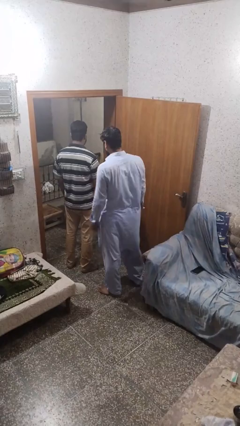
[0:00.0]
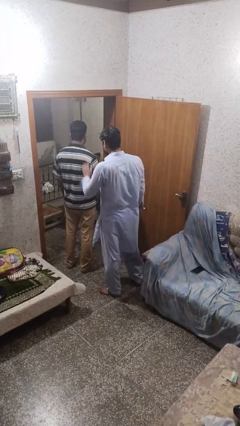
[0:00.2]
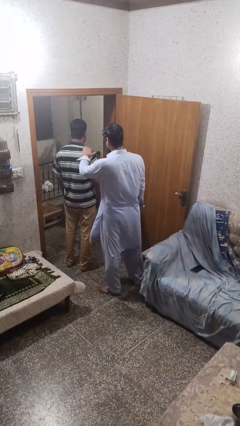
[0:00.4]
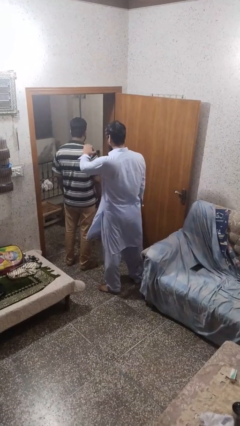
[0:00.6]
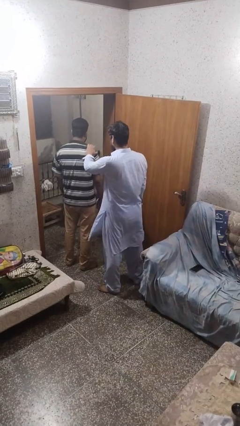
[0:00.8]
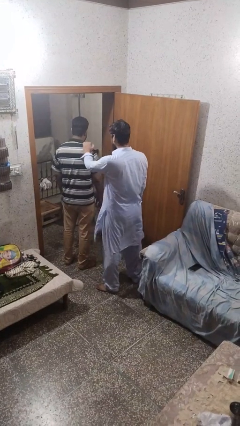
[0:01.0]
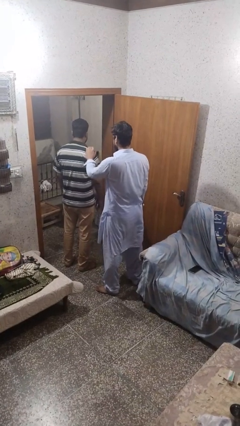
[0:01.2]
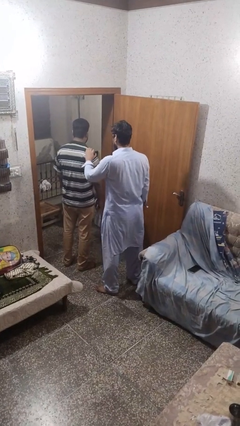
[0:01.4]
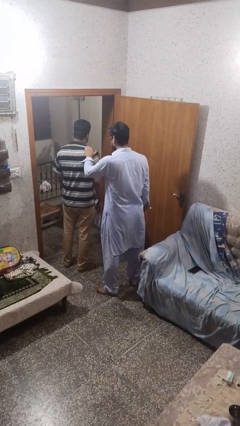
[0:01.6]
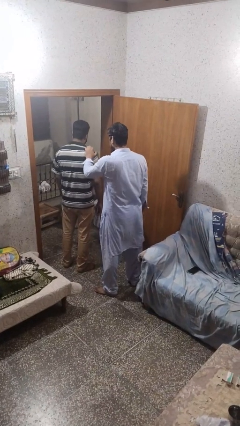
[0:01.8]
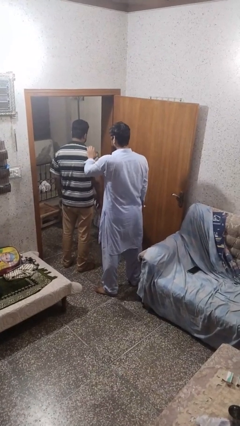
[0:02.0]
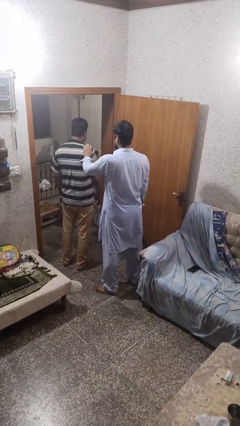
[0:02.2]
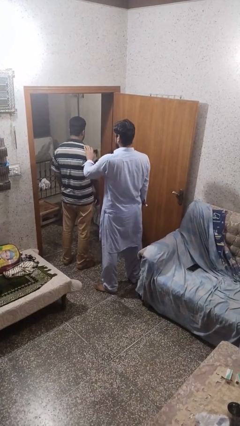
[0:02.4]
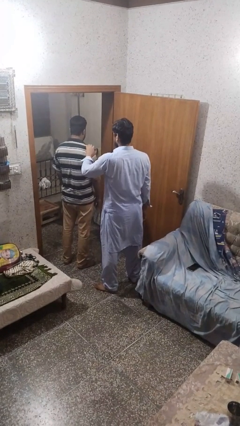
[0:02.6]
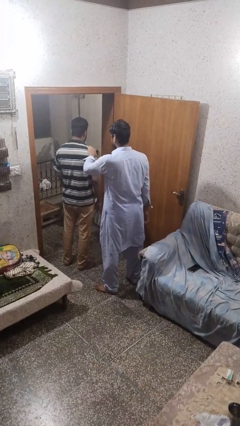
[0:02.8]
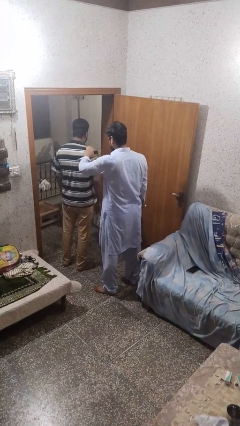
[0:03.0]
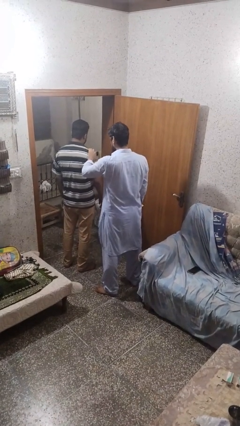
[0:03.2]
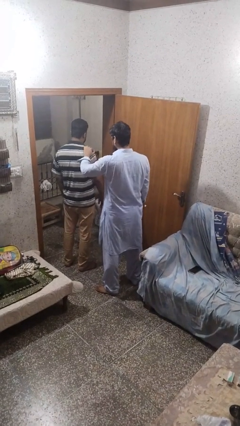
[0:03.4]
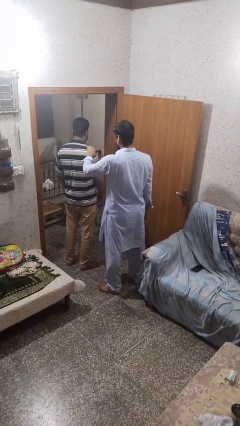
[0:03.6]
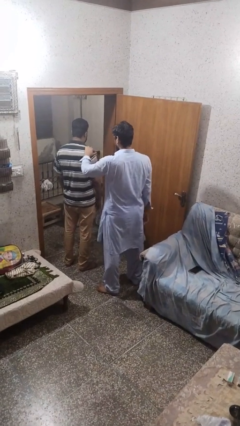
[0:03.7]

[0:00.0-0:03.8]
person grabs person by shoulder

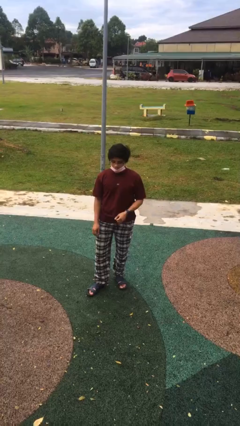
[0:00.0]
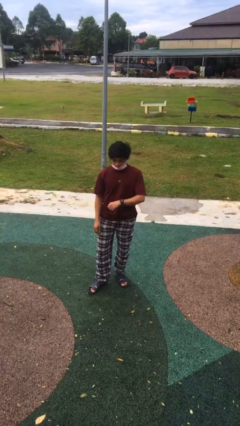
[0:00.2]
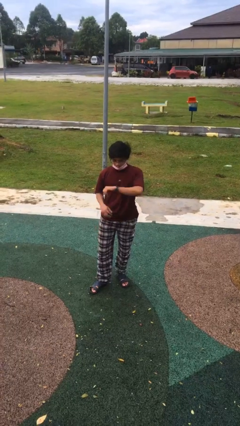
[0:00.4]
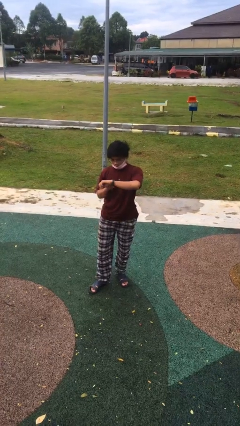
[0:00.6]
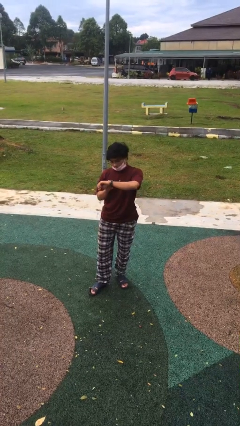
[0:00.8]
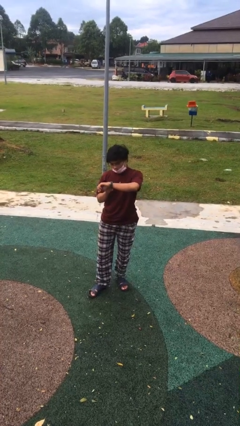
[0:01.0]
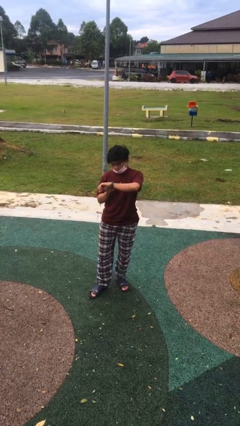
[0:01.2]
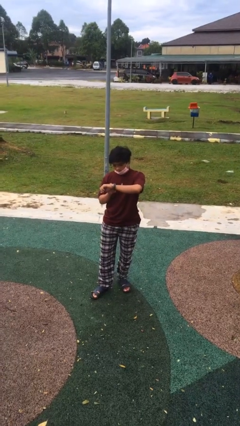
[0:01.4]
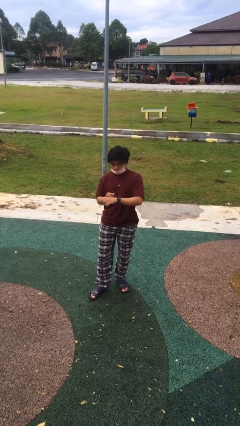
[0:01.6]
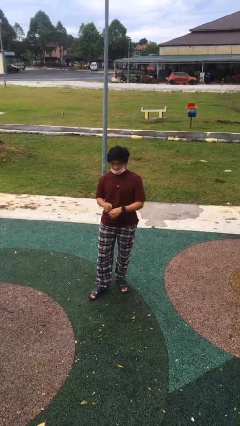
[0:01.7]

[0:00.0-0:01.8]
person looks at wristwatch

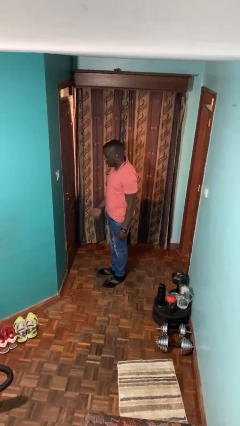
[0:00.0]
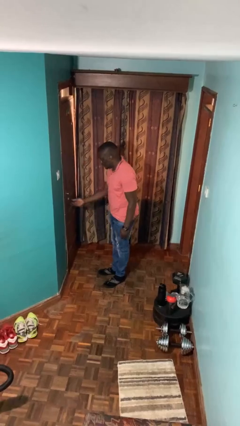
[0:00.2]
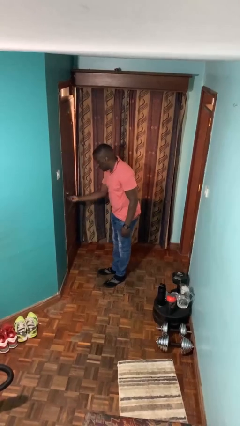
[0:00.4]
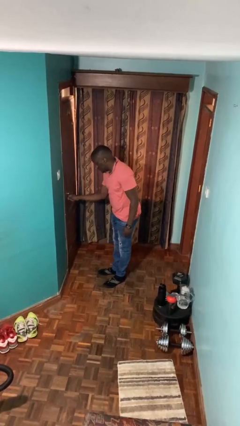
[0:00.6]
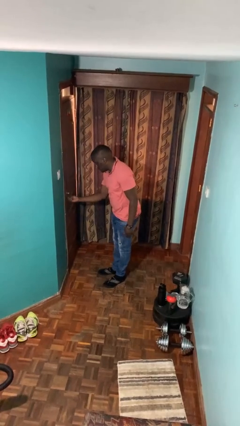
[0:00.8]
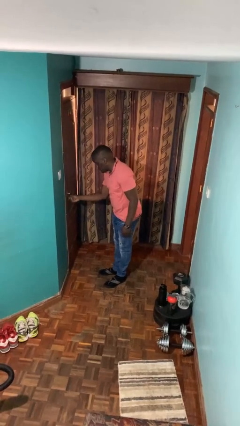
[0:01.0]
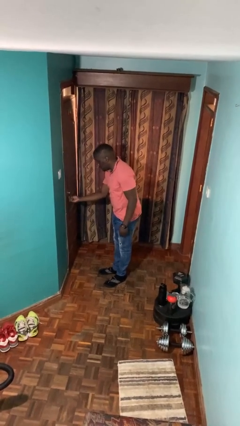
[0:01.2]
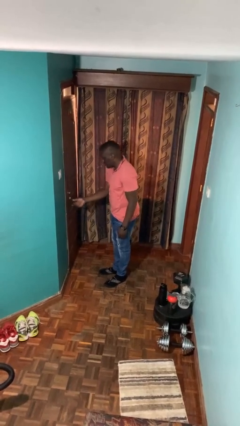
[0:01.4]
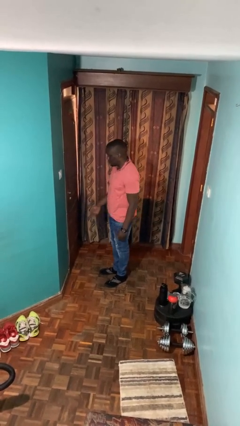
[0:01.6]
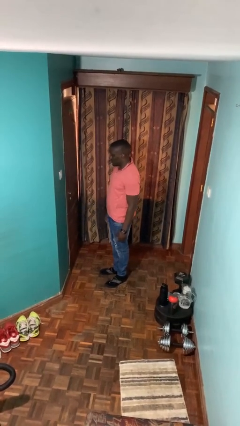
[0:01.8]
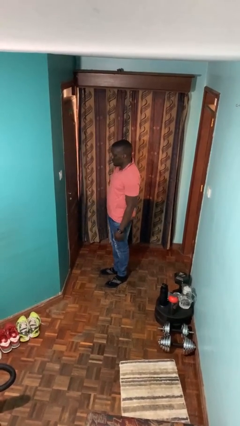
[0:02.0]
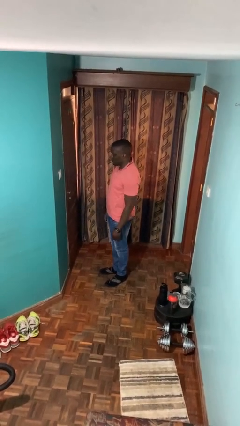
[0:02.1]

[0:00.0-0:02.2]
person locks door with keys

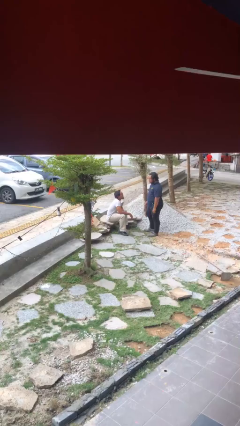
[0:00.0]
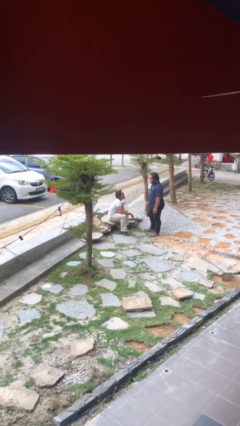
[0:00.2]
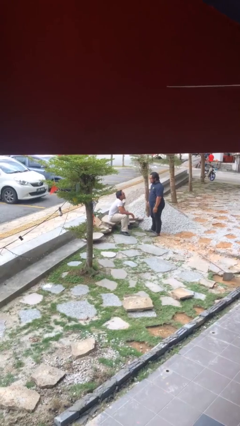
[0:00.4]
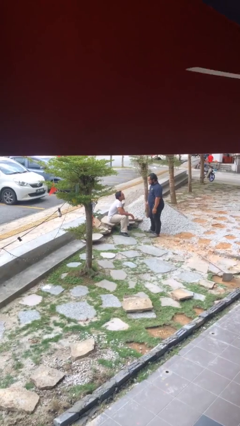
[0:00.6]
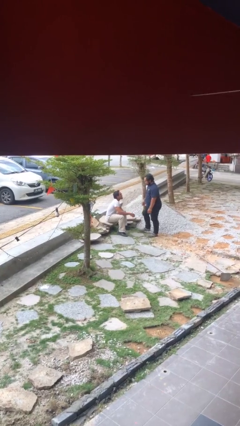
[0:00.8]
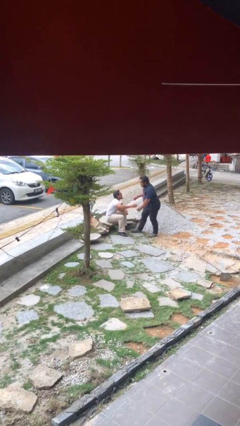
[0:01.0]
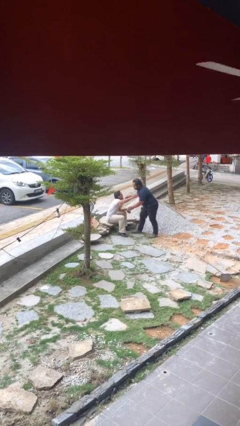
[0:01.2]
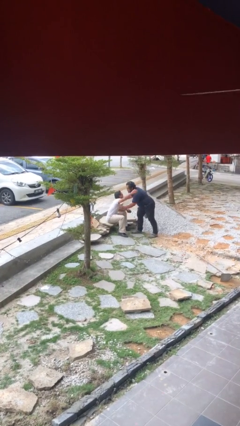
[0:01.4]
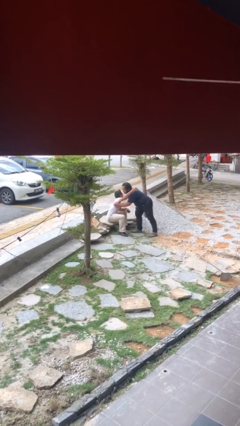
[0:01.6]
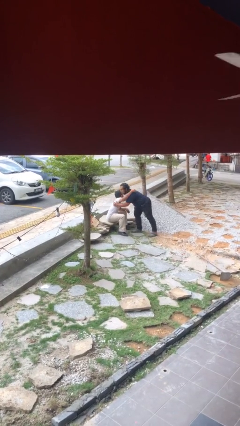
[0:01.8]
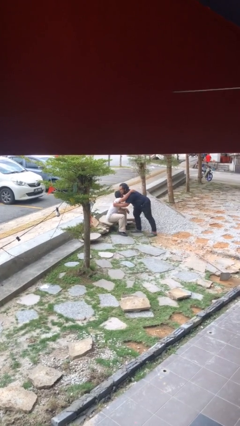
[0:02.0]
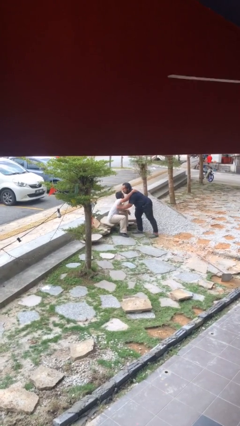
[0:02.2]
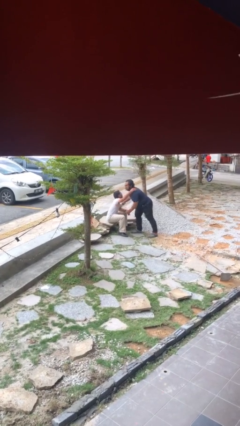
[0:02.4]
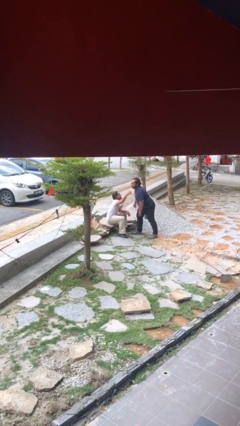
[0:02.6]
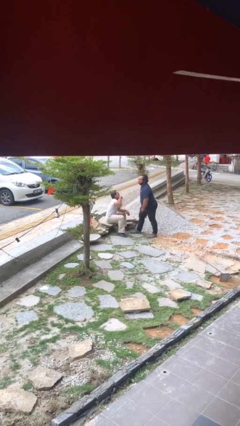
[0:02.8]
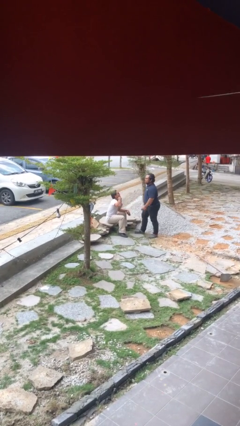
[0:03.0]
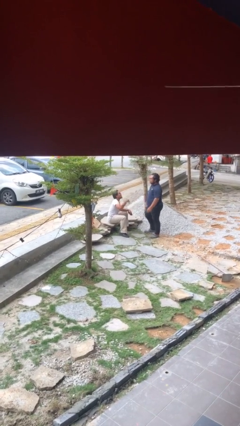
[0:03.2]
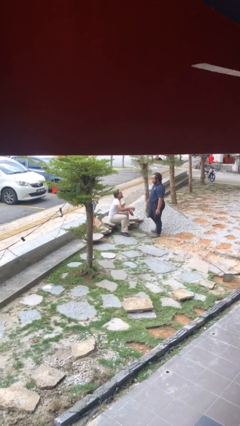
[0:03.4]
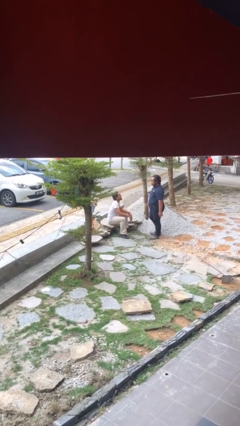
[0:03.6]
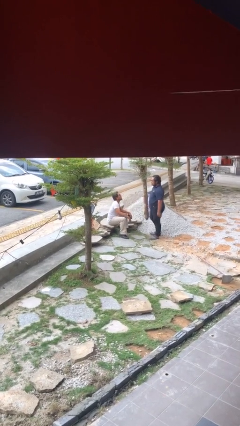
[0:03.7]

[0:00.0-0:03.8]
person embraces person

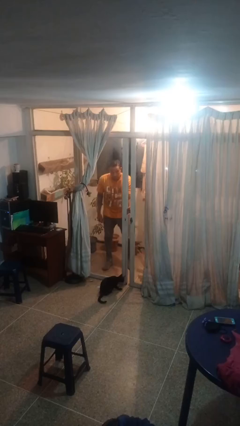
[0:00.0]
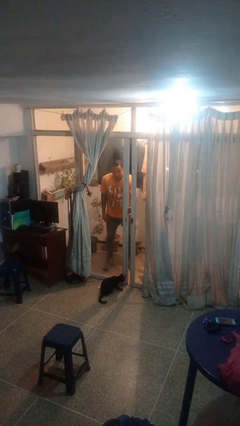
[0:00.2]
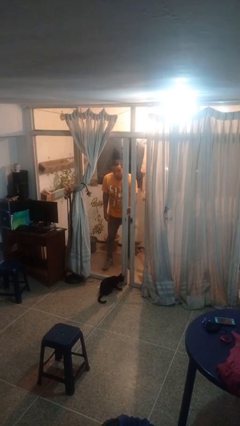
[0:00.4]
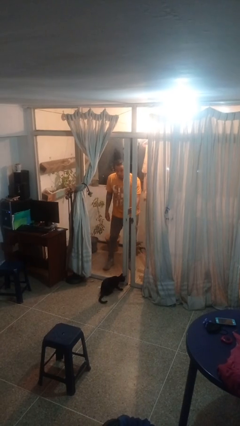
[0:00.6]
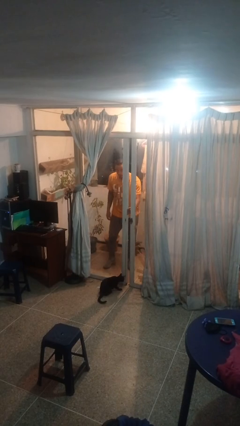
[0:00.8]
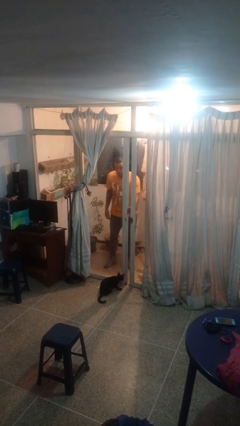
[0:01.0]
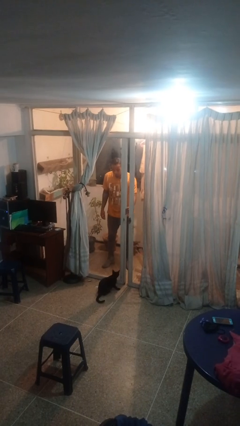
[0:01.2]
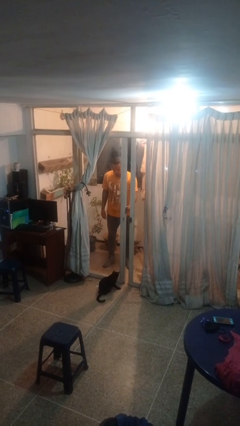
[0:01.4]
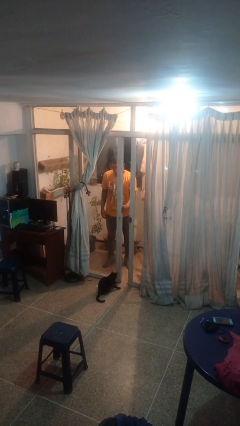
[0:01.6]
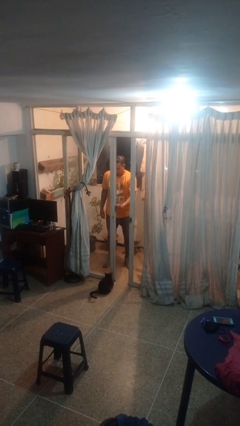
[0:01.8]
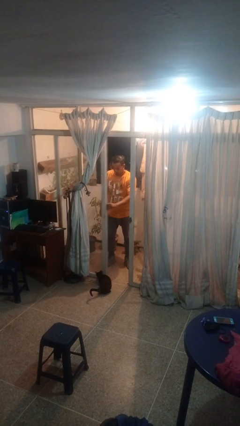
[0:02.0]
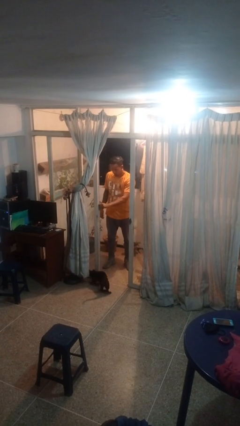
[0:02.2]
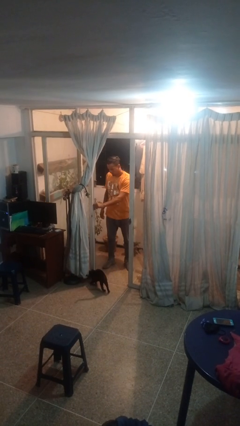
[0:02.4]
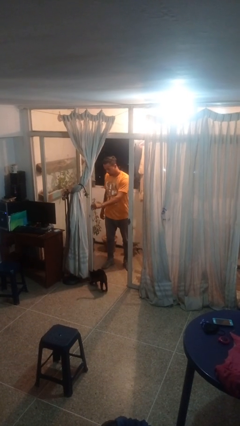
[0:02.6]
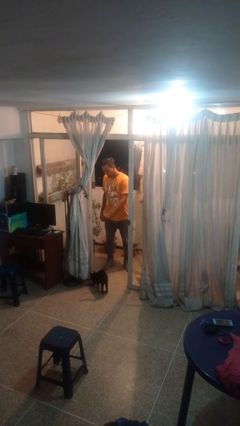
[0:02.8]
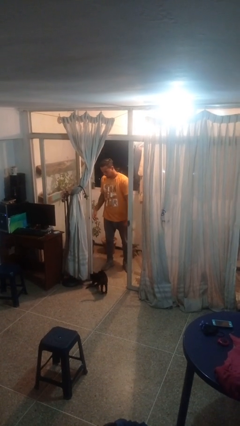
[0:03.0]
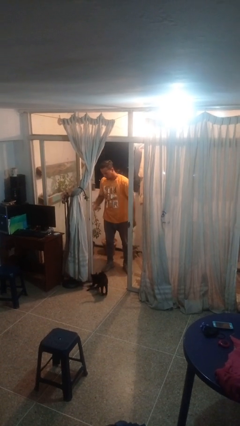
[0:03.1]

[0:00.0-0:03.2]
person opens sliding door

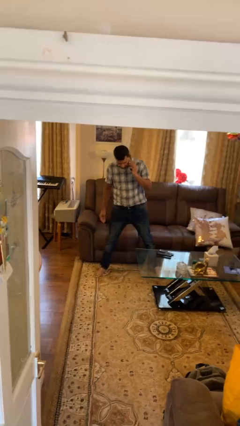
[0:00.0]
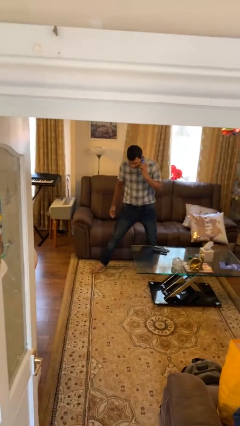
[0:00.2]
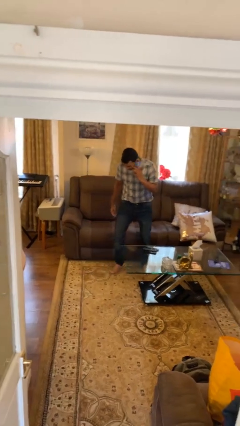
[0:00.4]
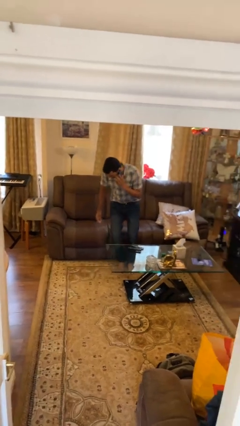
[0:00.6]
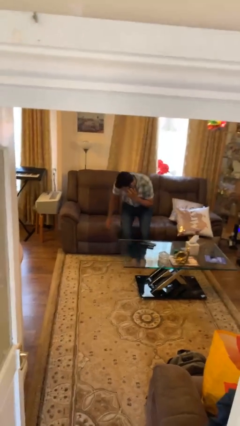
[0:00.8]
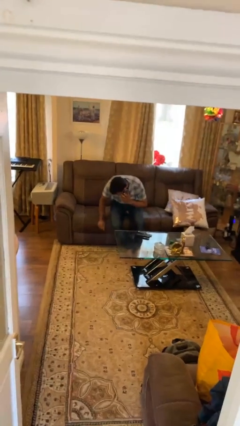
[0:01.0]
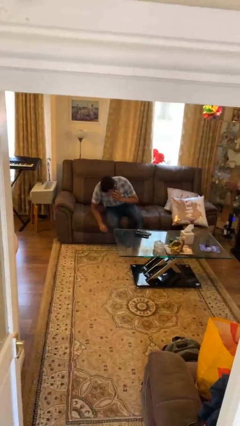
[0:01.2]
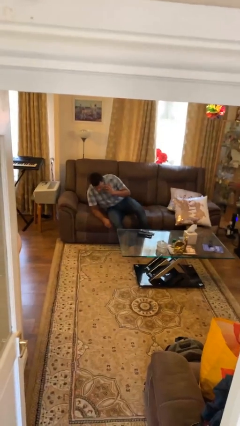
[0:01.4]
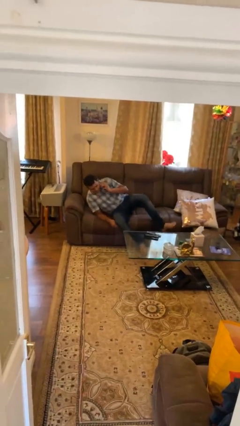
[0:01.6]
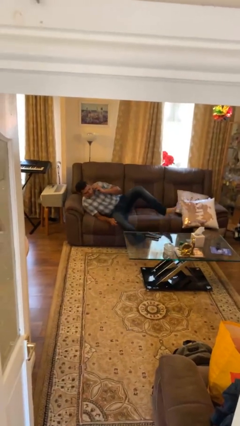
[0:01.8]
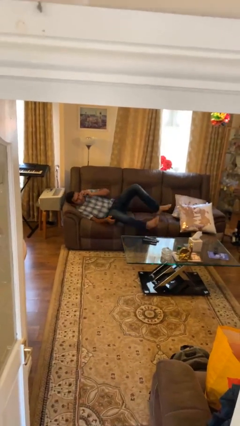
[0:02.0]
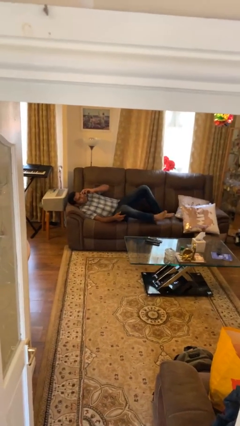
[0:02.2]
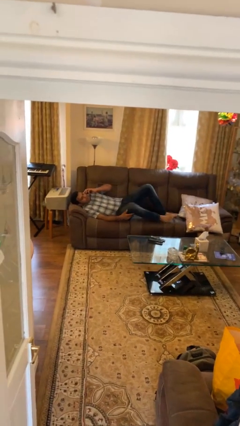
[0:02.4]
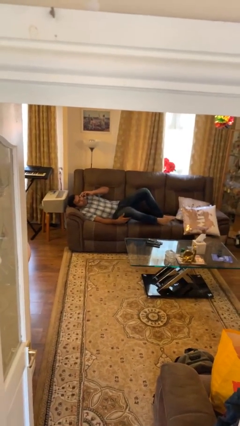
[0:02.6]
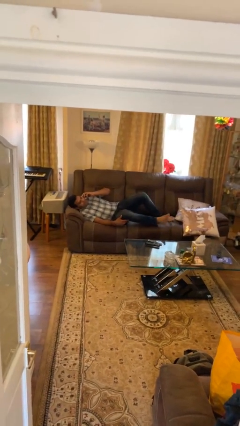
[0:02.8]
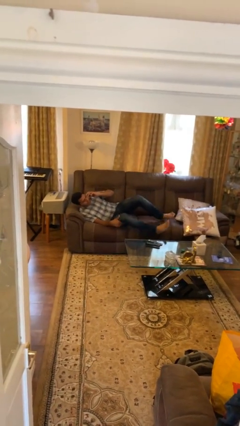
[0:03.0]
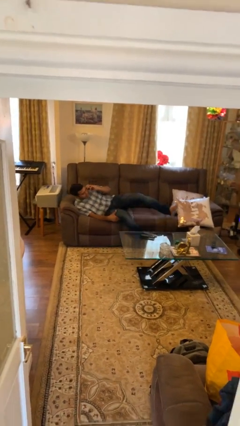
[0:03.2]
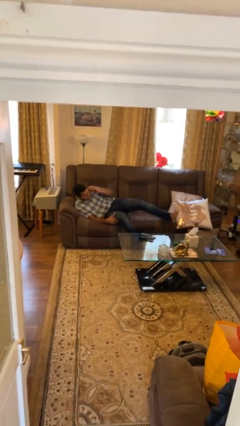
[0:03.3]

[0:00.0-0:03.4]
person lies down on couch
